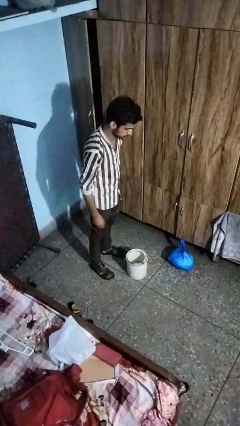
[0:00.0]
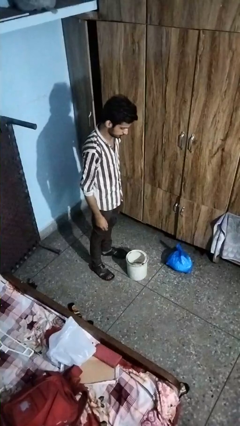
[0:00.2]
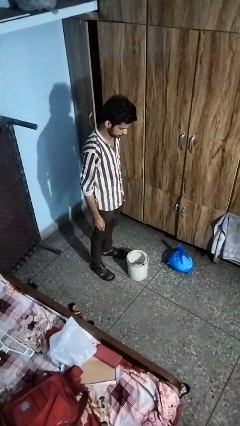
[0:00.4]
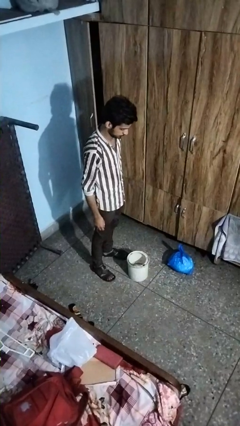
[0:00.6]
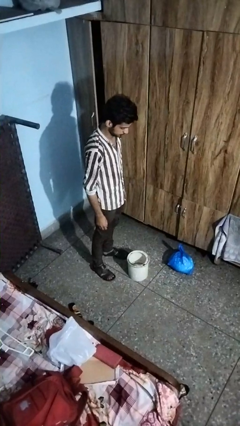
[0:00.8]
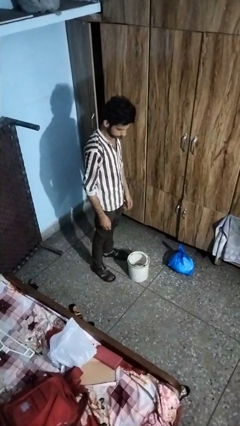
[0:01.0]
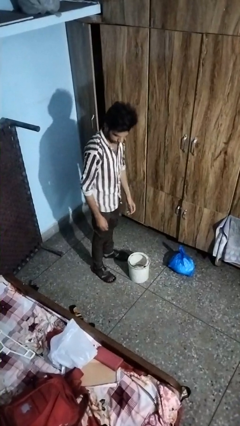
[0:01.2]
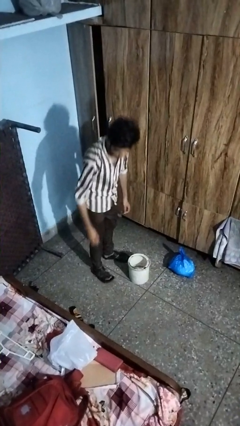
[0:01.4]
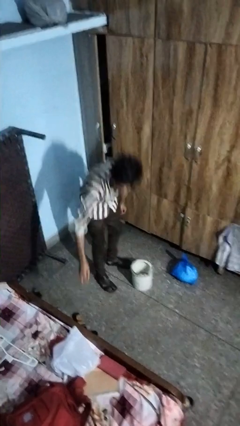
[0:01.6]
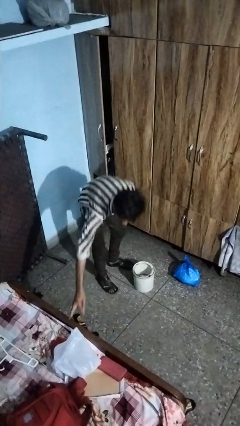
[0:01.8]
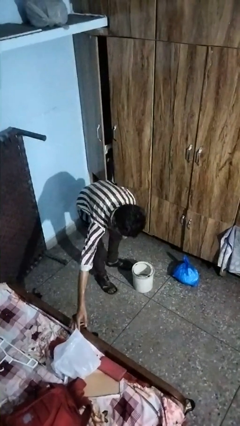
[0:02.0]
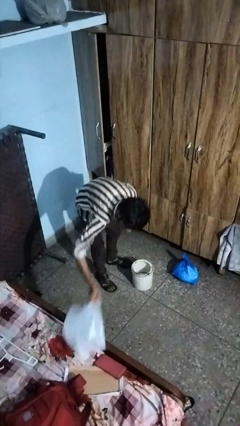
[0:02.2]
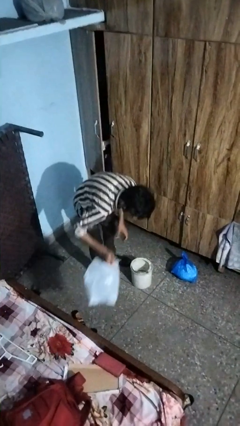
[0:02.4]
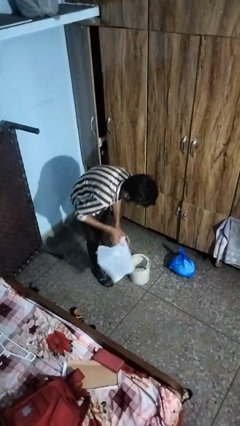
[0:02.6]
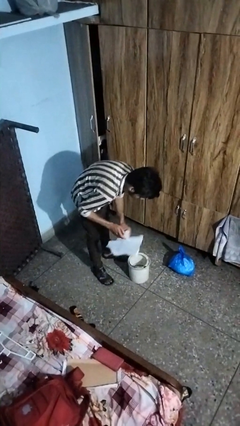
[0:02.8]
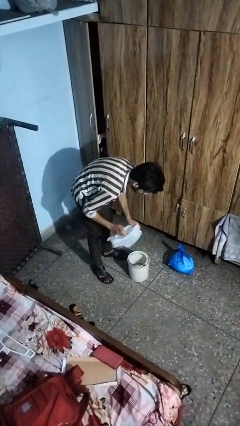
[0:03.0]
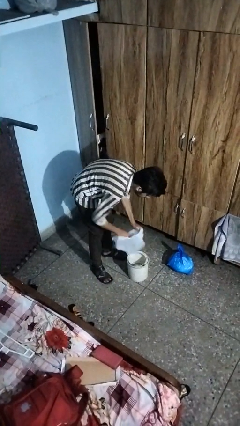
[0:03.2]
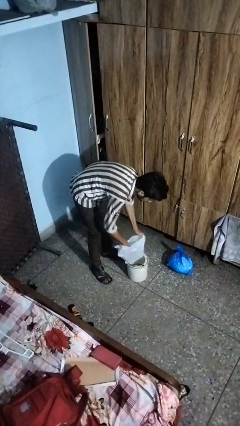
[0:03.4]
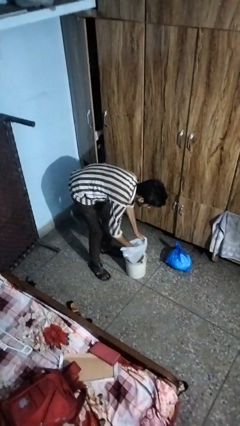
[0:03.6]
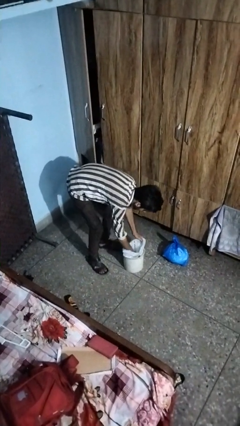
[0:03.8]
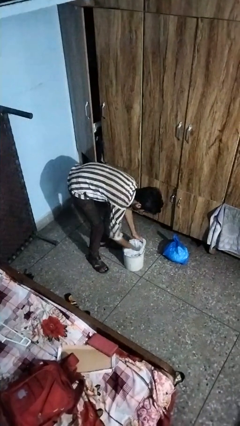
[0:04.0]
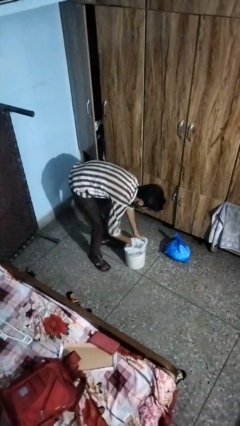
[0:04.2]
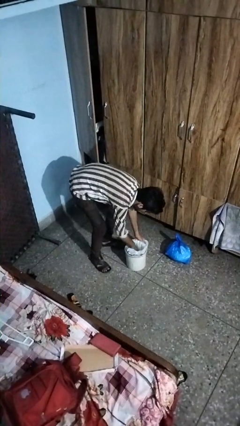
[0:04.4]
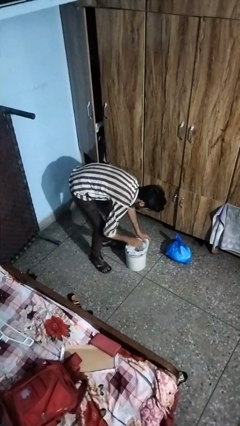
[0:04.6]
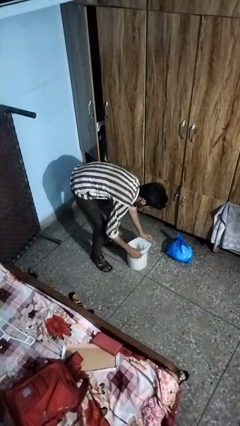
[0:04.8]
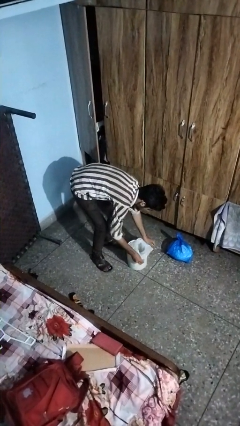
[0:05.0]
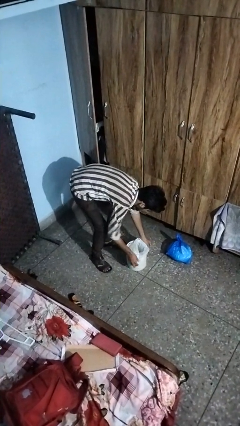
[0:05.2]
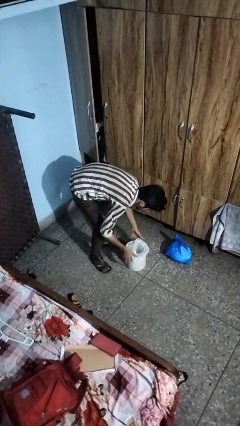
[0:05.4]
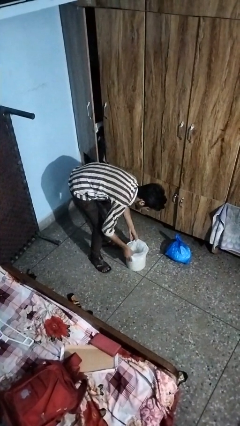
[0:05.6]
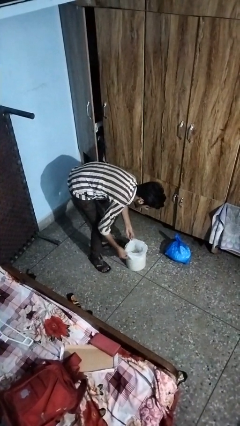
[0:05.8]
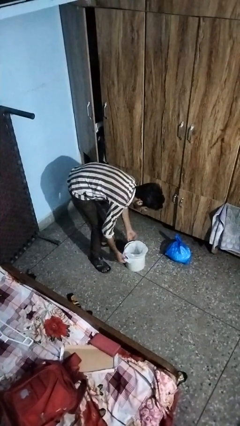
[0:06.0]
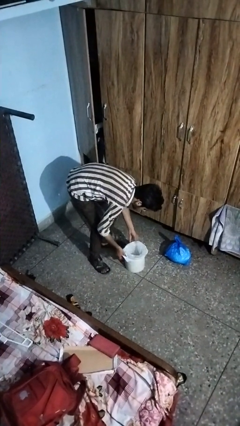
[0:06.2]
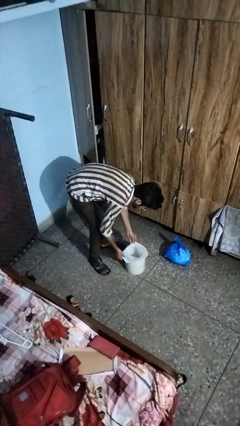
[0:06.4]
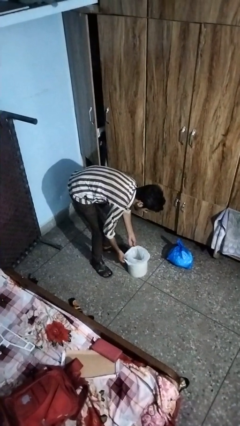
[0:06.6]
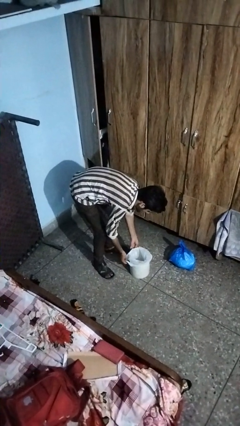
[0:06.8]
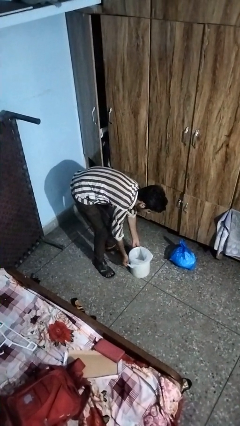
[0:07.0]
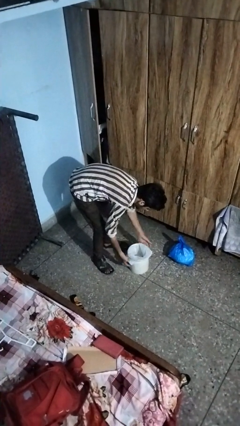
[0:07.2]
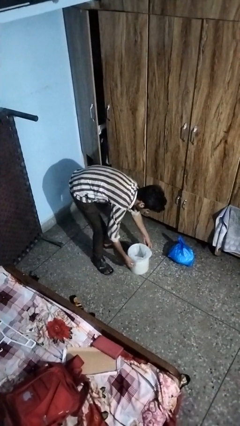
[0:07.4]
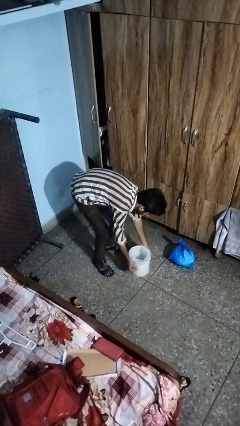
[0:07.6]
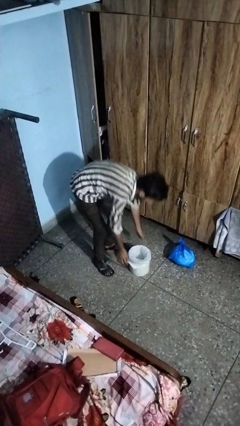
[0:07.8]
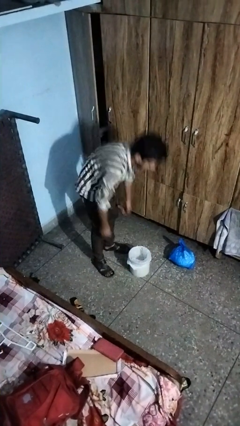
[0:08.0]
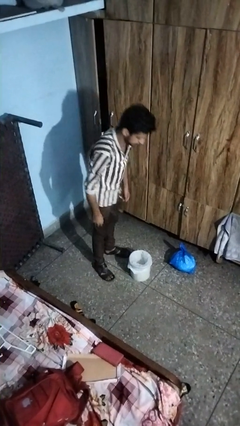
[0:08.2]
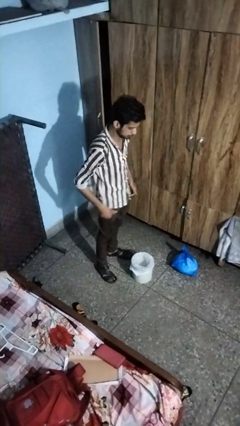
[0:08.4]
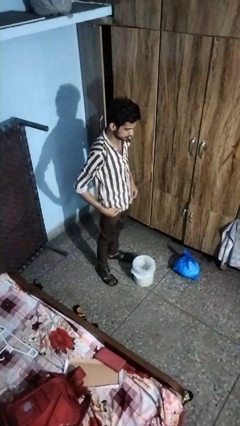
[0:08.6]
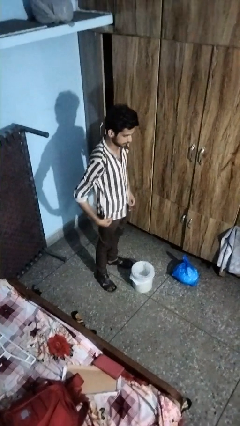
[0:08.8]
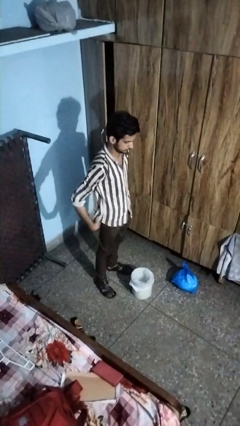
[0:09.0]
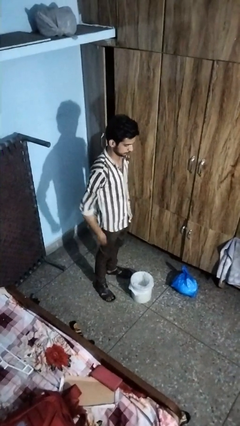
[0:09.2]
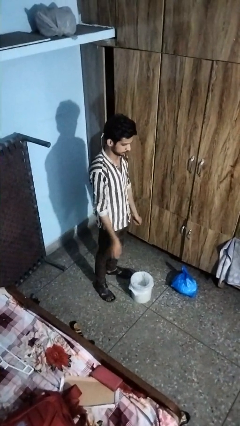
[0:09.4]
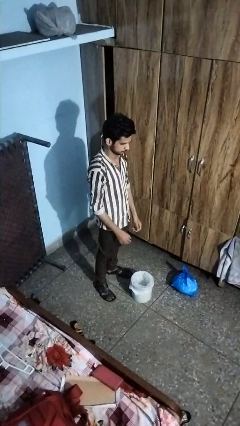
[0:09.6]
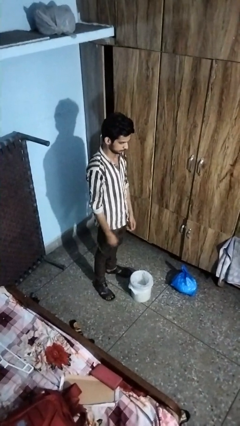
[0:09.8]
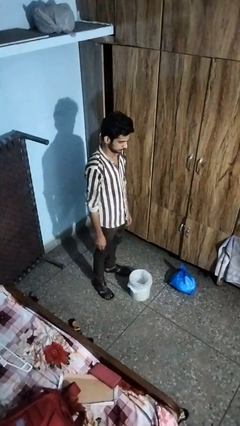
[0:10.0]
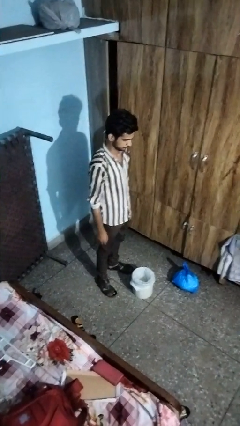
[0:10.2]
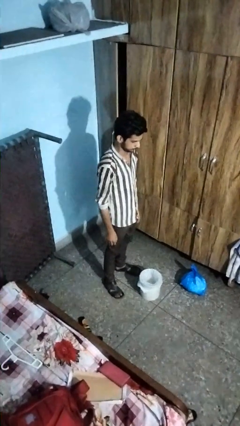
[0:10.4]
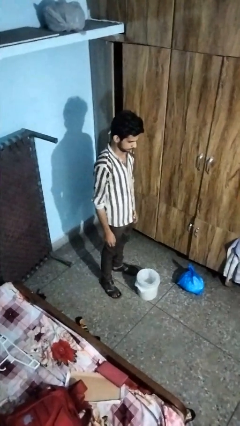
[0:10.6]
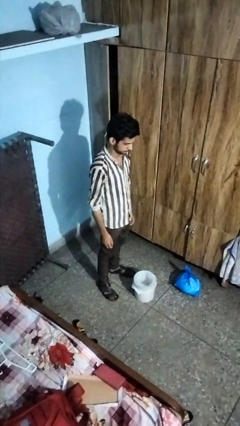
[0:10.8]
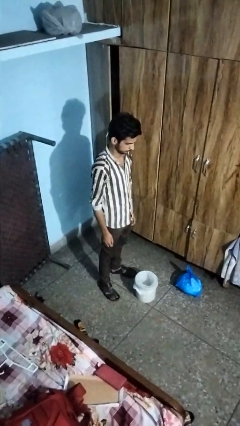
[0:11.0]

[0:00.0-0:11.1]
person inserts trashbag into trashcan

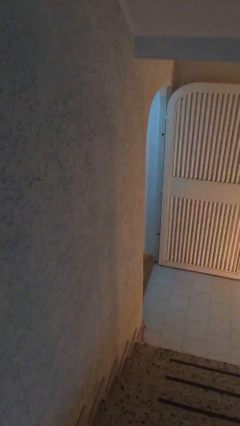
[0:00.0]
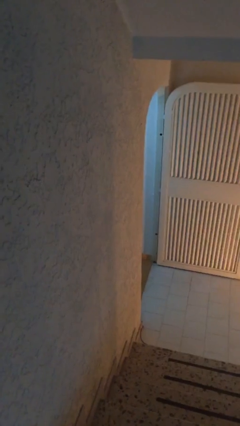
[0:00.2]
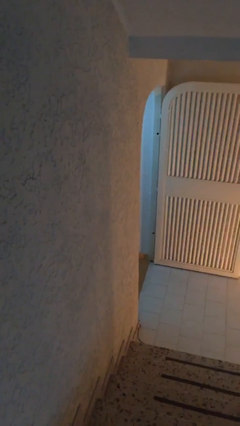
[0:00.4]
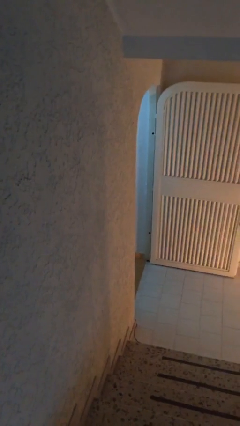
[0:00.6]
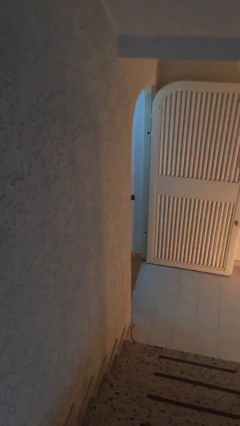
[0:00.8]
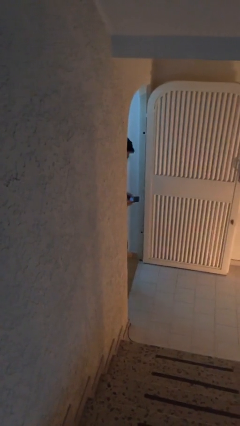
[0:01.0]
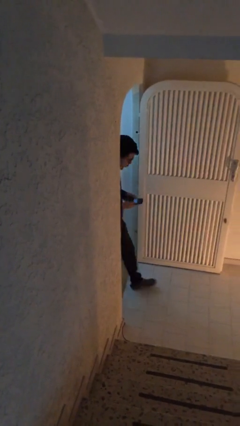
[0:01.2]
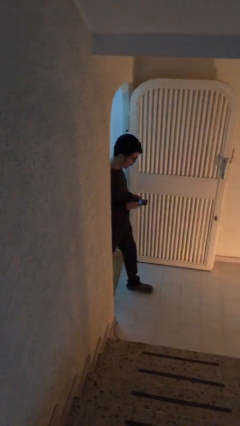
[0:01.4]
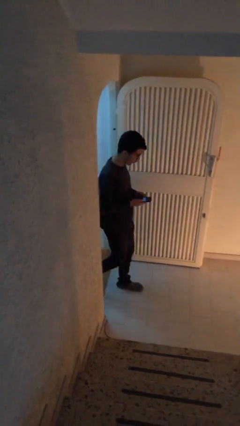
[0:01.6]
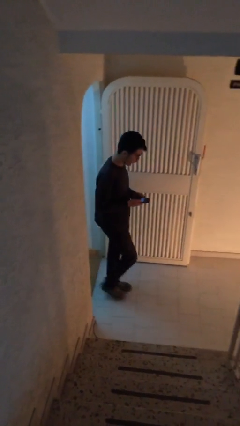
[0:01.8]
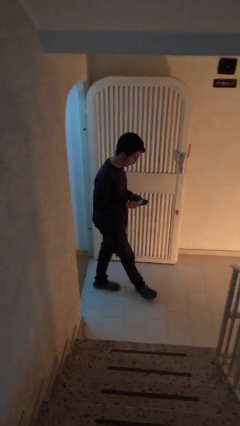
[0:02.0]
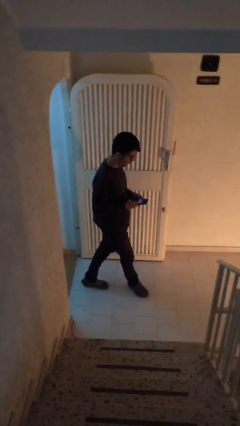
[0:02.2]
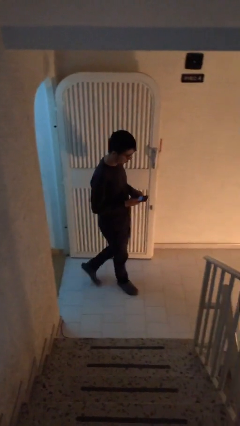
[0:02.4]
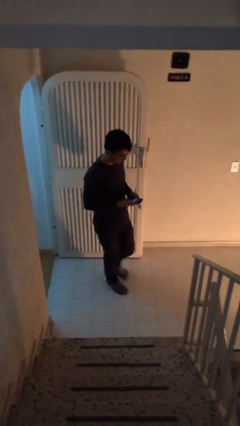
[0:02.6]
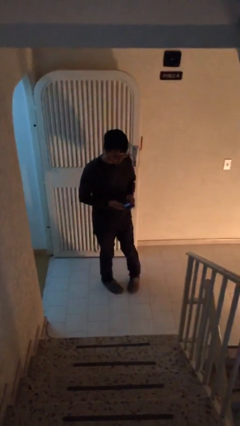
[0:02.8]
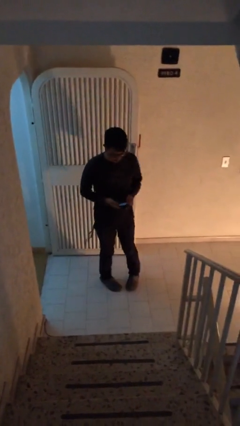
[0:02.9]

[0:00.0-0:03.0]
person enters scene through structure

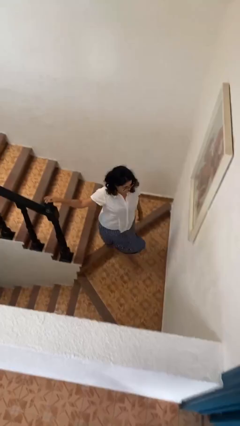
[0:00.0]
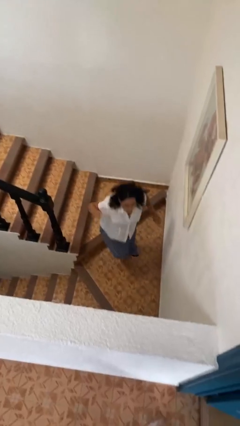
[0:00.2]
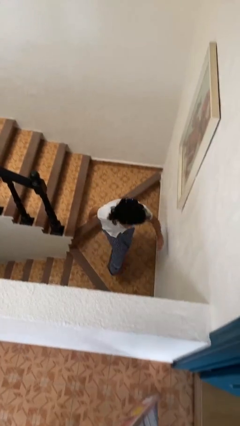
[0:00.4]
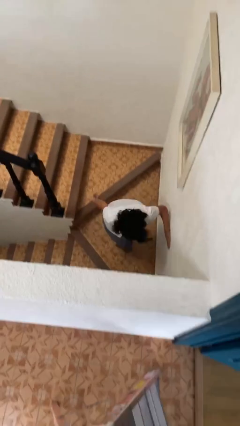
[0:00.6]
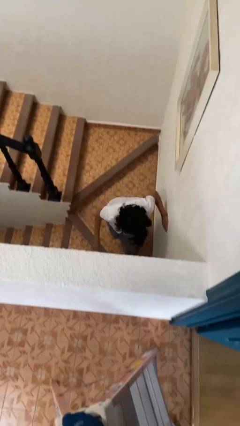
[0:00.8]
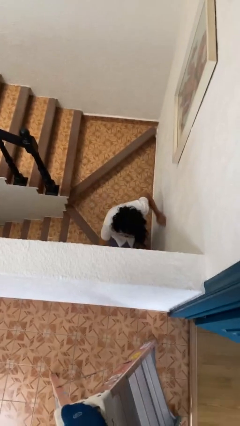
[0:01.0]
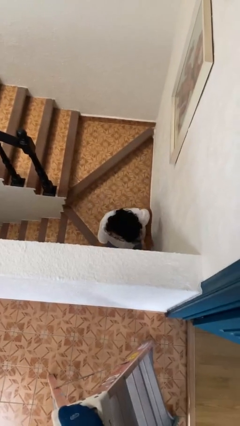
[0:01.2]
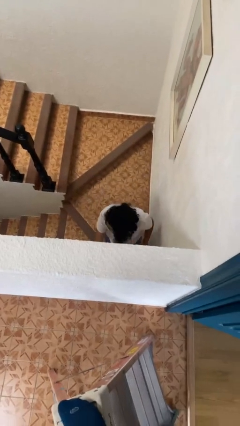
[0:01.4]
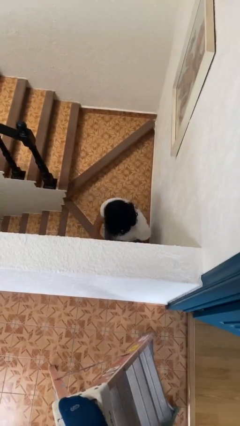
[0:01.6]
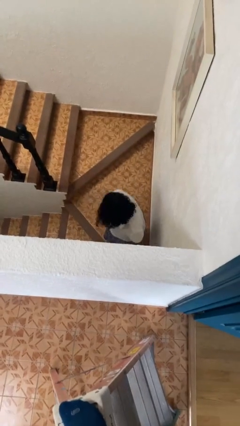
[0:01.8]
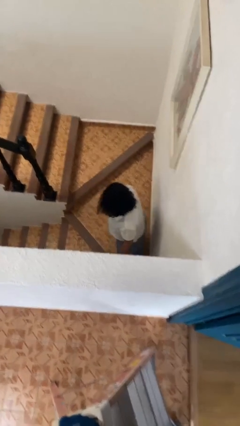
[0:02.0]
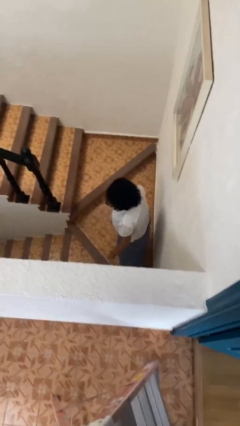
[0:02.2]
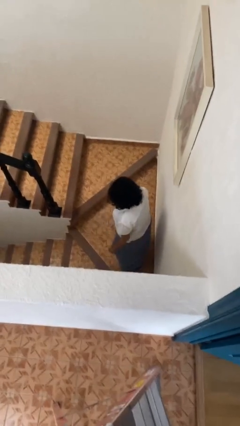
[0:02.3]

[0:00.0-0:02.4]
person trips on stair

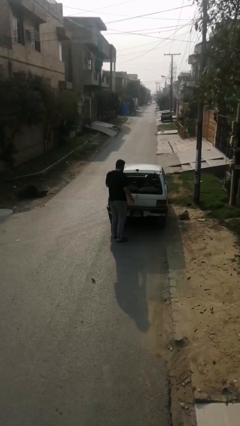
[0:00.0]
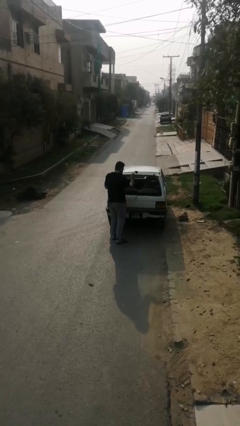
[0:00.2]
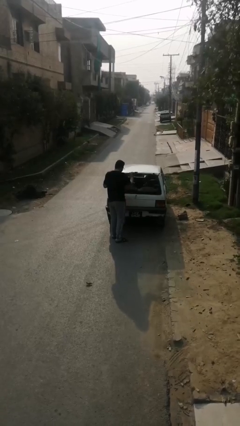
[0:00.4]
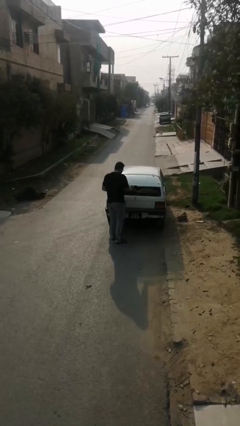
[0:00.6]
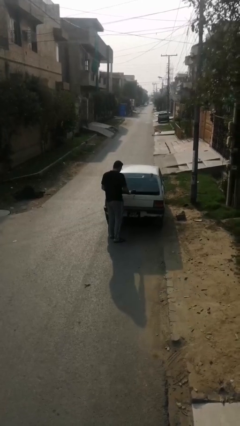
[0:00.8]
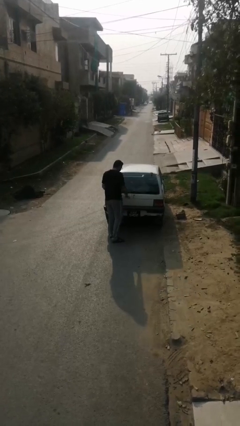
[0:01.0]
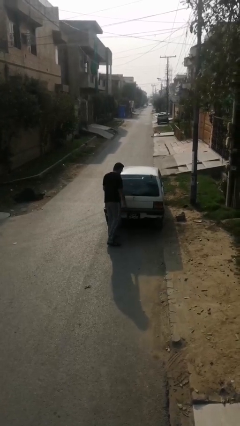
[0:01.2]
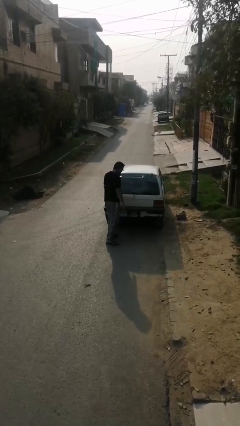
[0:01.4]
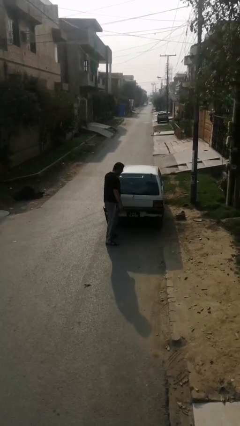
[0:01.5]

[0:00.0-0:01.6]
person closes car trunk
